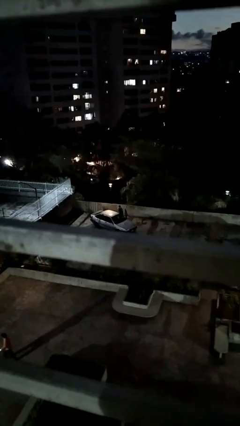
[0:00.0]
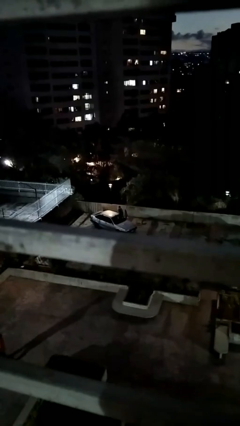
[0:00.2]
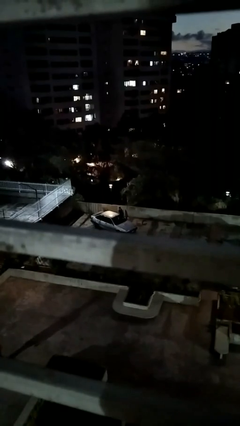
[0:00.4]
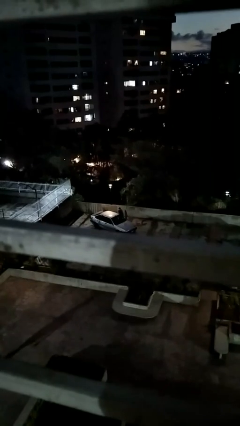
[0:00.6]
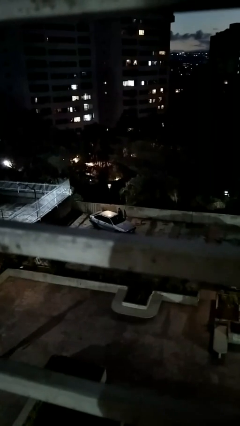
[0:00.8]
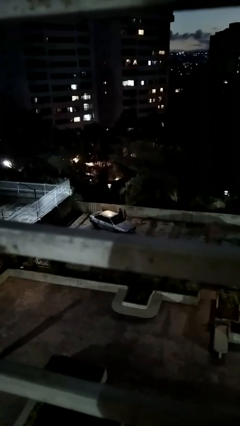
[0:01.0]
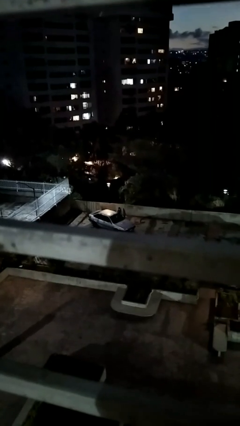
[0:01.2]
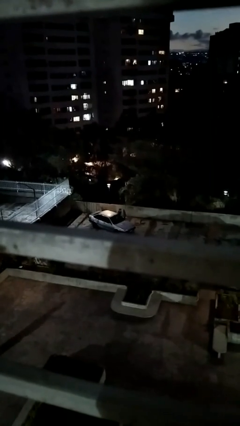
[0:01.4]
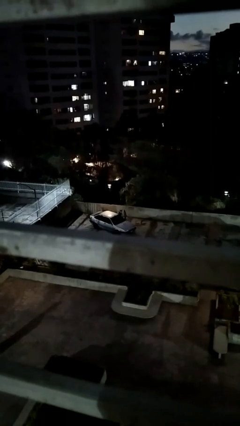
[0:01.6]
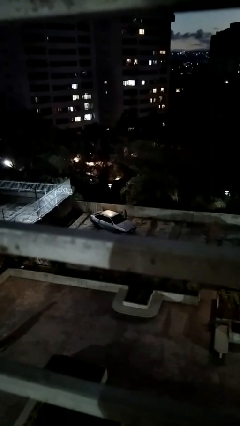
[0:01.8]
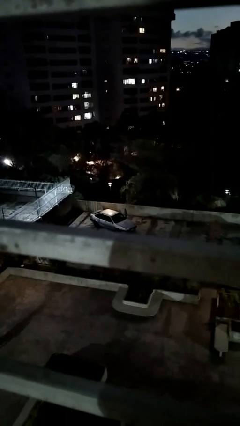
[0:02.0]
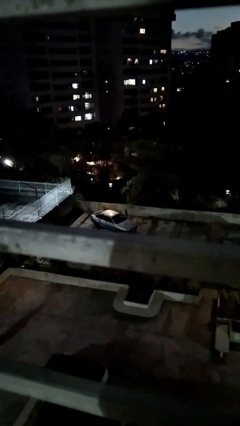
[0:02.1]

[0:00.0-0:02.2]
person enters car

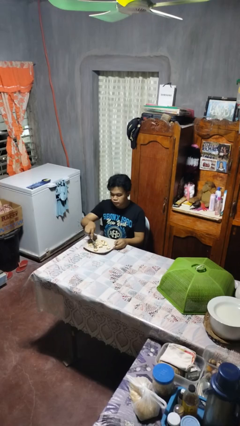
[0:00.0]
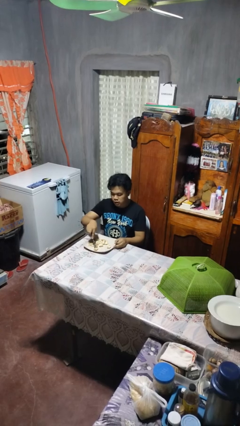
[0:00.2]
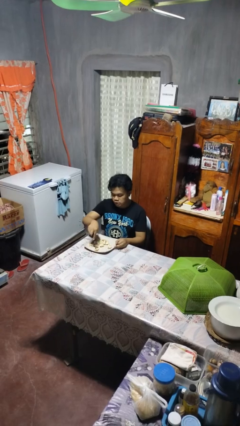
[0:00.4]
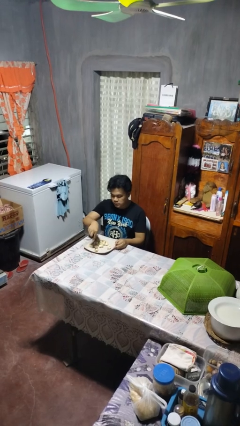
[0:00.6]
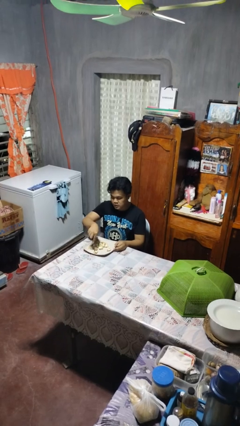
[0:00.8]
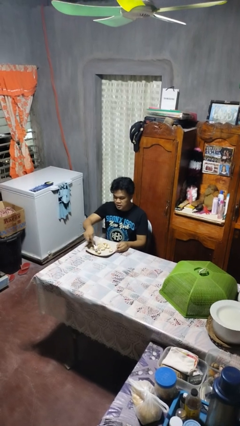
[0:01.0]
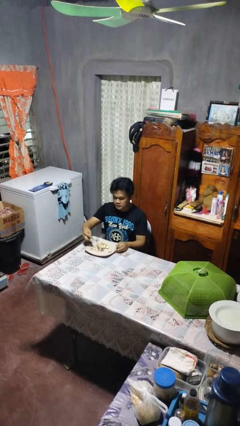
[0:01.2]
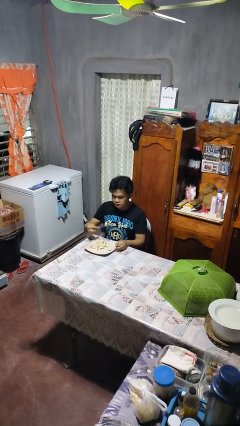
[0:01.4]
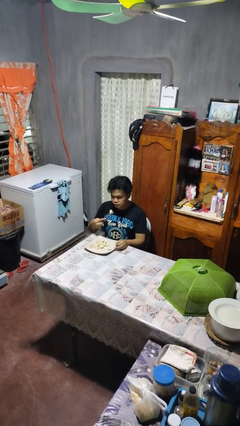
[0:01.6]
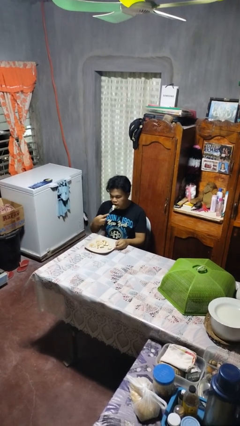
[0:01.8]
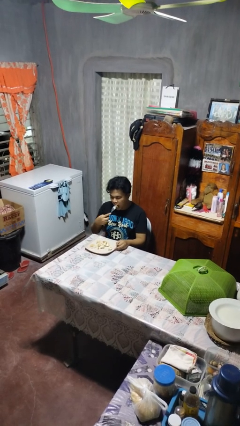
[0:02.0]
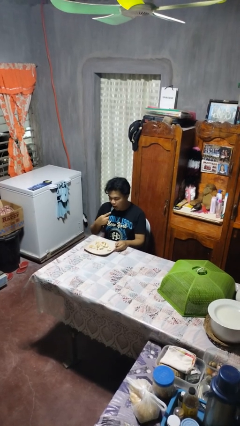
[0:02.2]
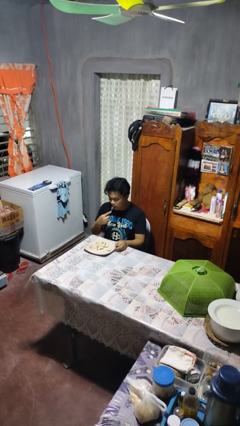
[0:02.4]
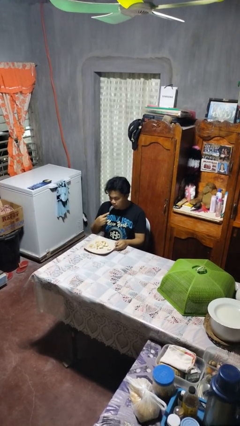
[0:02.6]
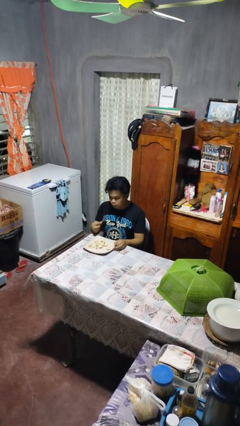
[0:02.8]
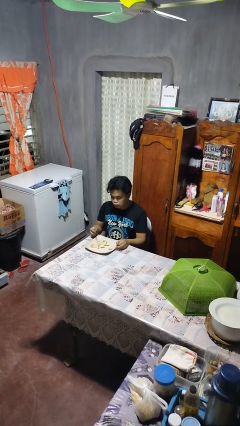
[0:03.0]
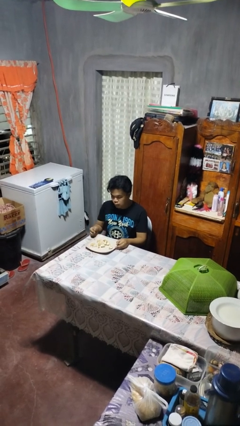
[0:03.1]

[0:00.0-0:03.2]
person eats with utensil

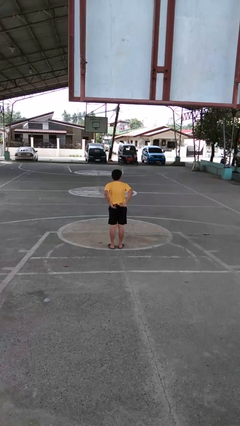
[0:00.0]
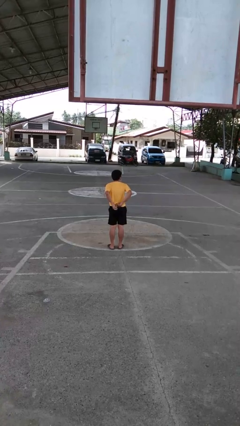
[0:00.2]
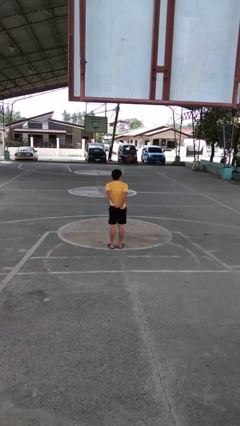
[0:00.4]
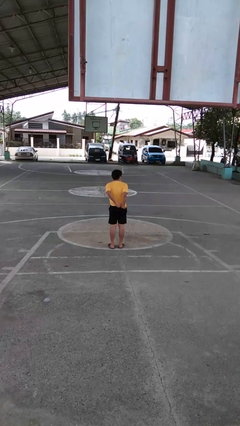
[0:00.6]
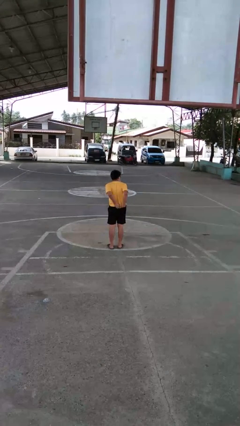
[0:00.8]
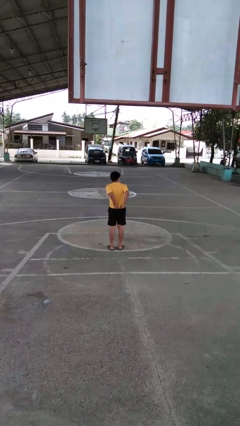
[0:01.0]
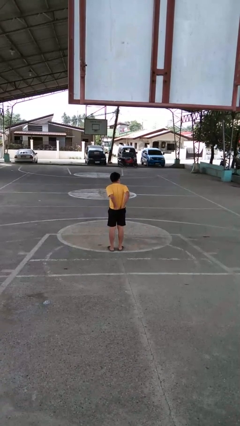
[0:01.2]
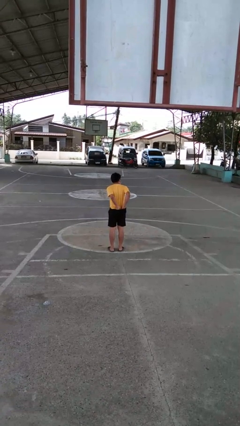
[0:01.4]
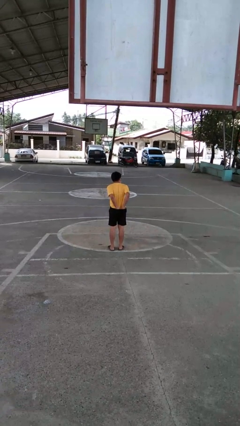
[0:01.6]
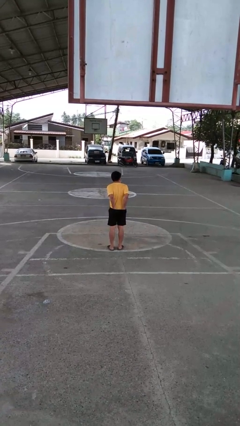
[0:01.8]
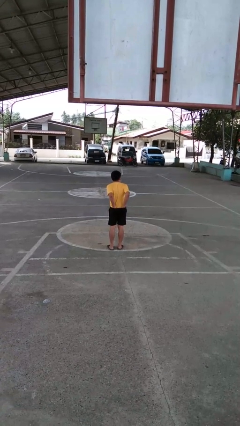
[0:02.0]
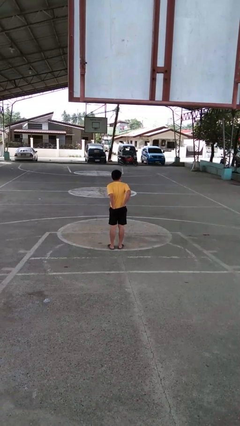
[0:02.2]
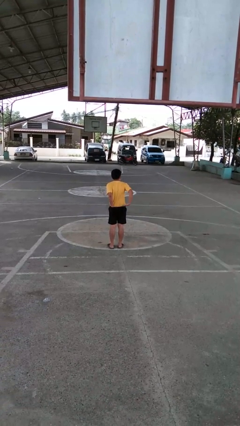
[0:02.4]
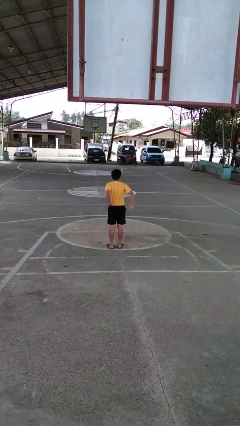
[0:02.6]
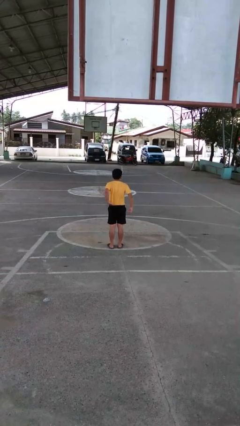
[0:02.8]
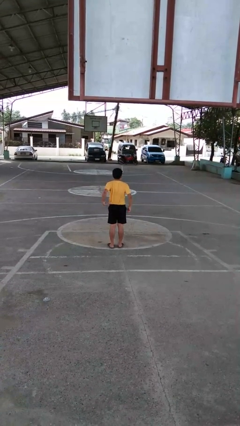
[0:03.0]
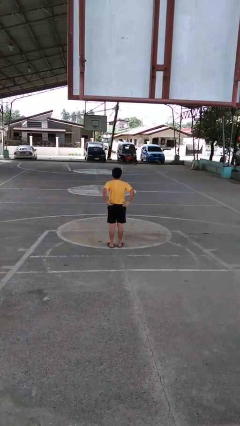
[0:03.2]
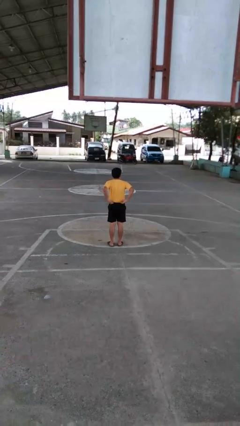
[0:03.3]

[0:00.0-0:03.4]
person tucks in shirt

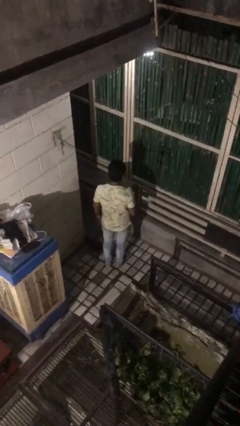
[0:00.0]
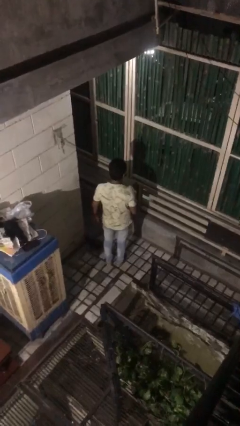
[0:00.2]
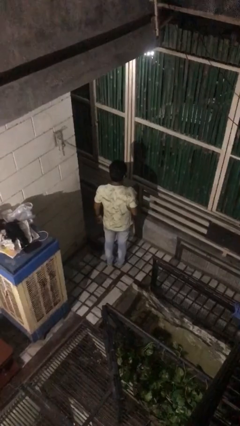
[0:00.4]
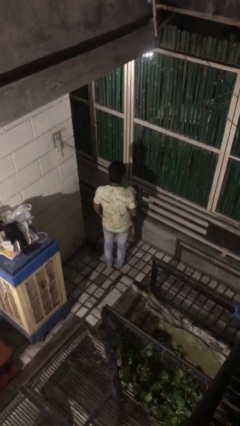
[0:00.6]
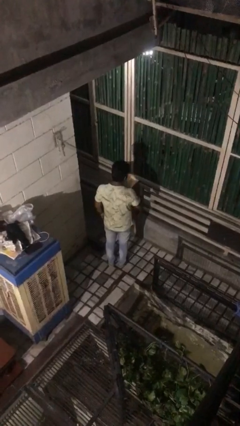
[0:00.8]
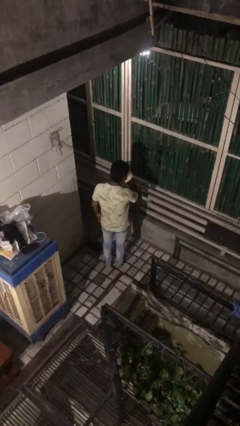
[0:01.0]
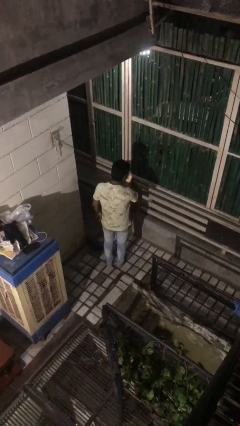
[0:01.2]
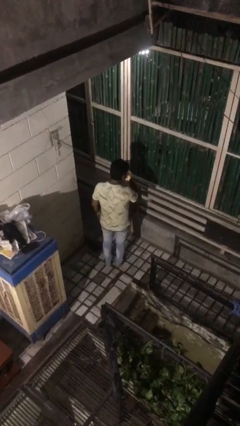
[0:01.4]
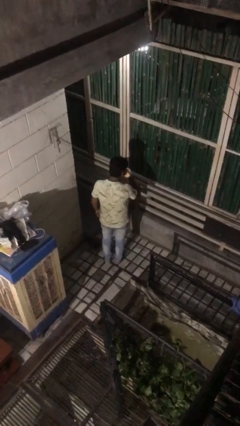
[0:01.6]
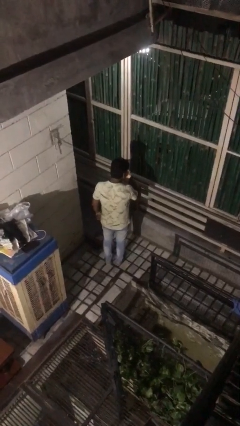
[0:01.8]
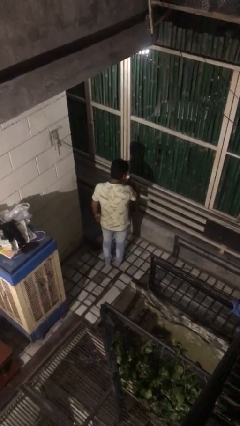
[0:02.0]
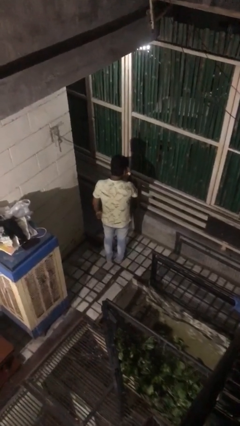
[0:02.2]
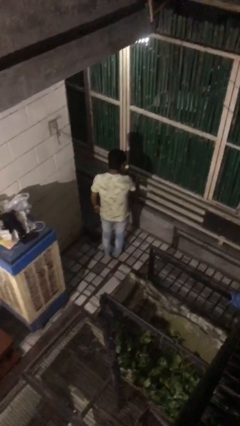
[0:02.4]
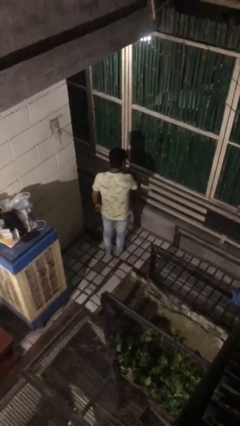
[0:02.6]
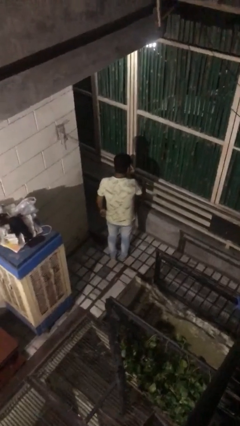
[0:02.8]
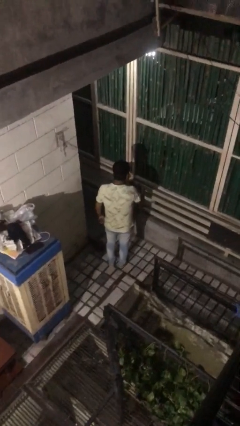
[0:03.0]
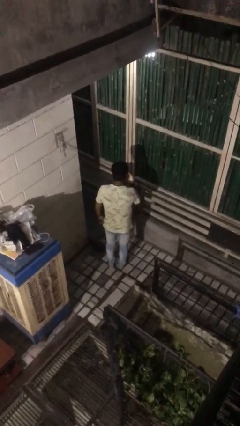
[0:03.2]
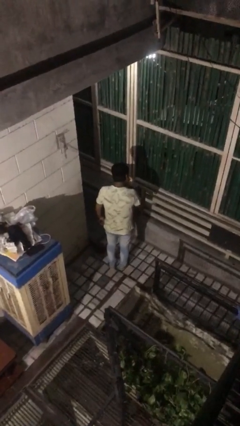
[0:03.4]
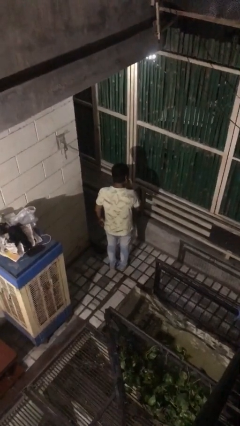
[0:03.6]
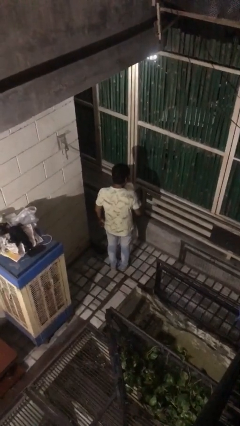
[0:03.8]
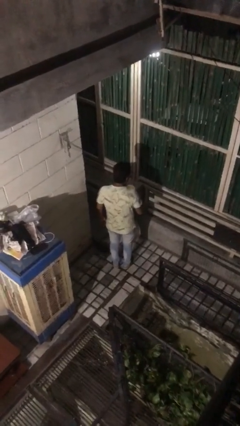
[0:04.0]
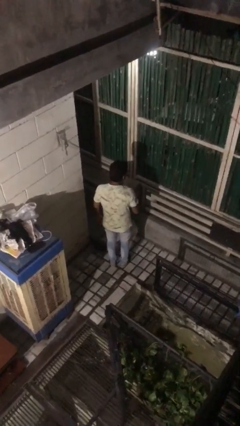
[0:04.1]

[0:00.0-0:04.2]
person blows nose

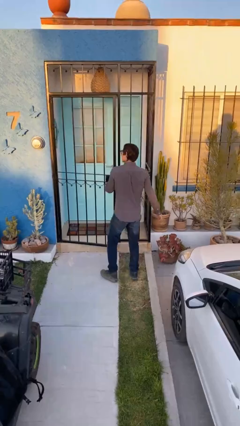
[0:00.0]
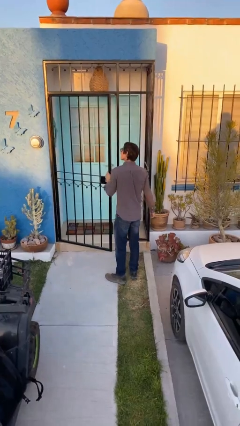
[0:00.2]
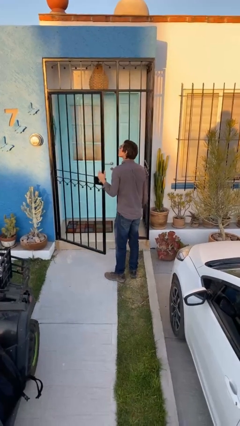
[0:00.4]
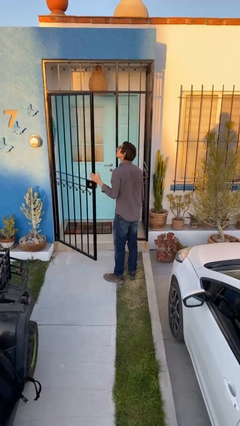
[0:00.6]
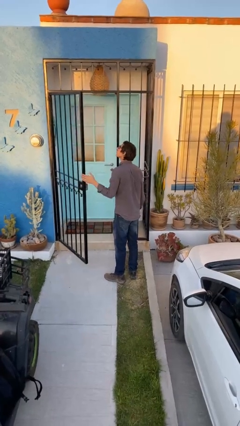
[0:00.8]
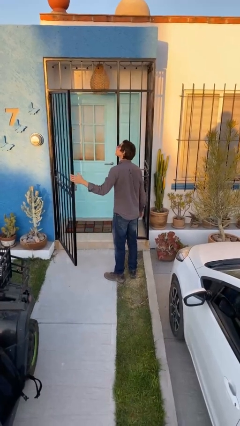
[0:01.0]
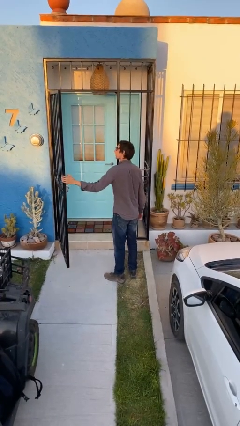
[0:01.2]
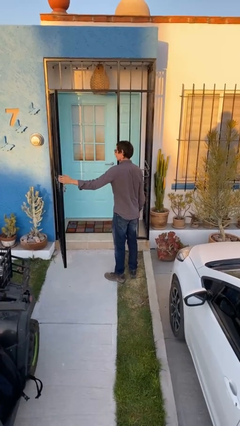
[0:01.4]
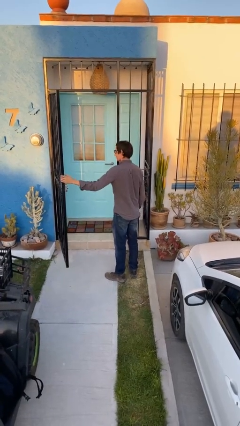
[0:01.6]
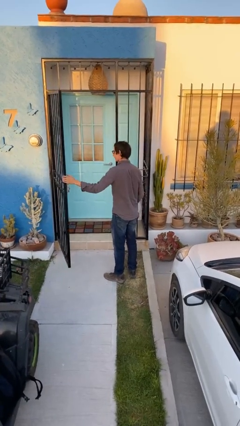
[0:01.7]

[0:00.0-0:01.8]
person opens facility door

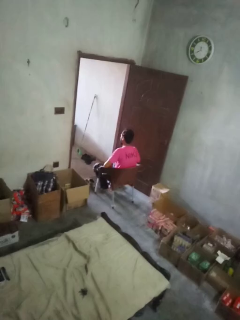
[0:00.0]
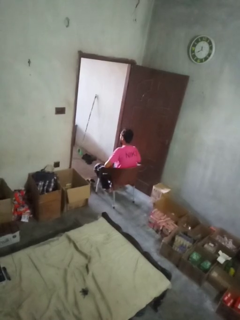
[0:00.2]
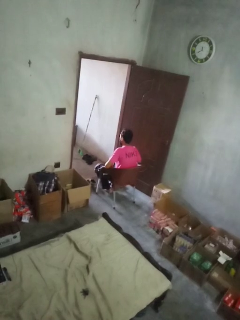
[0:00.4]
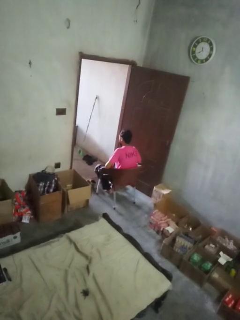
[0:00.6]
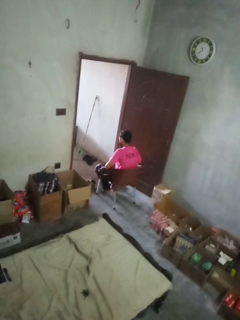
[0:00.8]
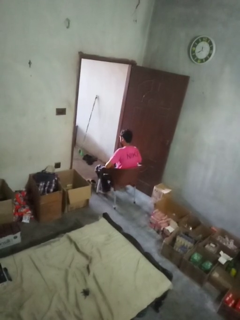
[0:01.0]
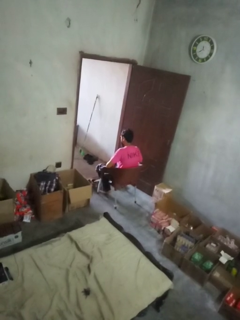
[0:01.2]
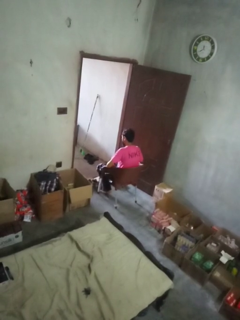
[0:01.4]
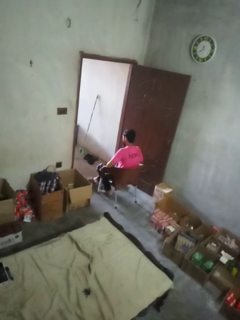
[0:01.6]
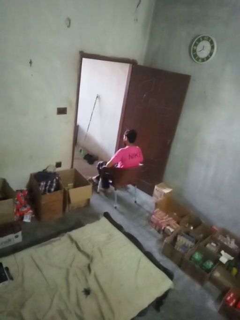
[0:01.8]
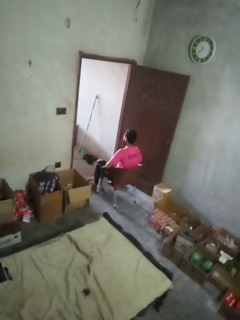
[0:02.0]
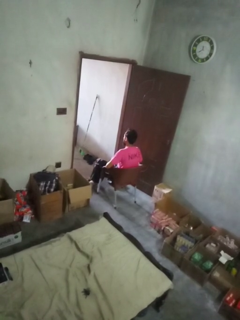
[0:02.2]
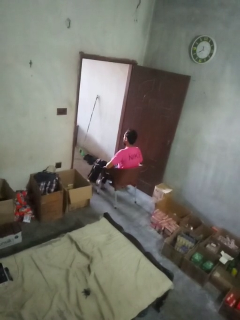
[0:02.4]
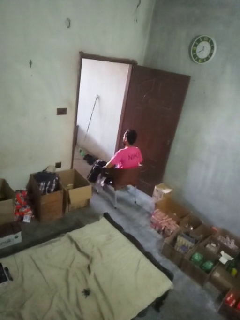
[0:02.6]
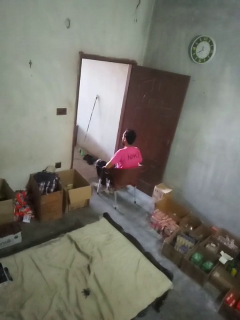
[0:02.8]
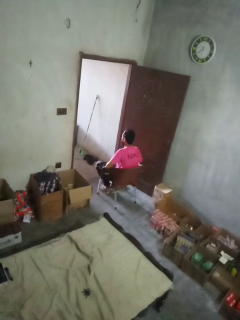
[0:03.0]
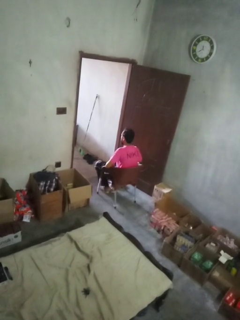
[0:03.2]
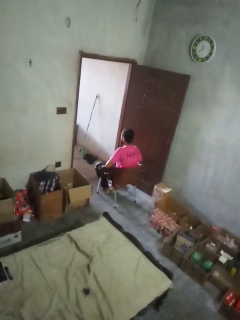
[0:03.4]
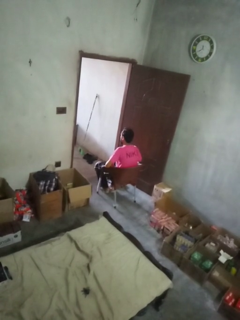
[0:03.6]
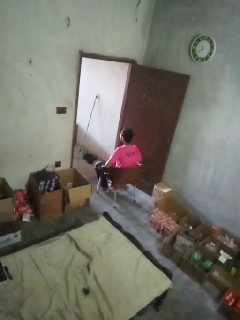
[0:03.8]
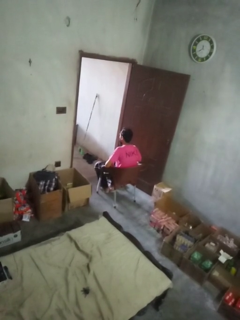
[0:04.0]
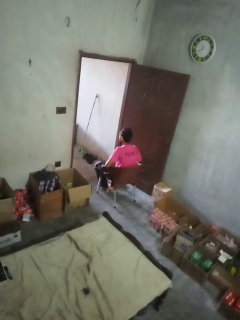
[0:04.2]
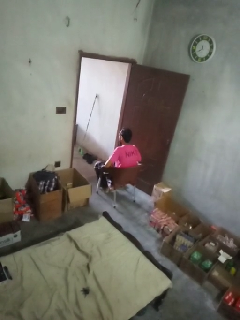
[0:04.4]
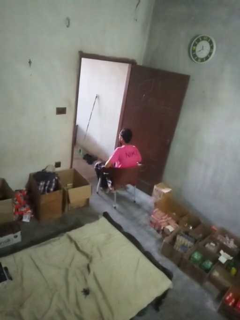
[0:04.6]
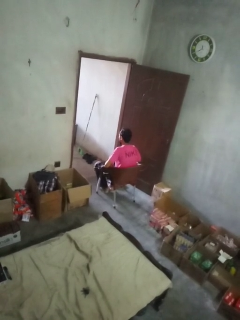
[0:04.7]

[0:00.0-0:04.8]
person puts on shoes
